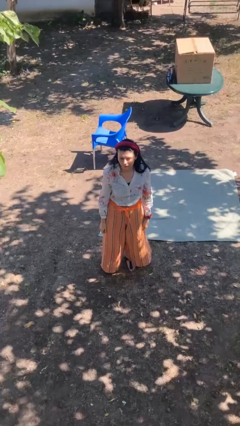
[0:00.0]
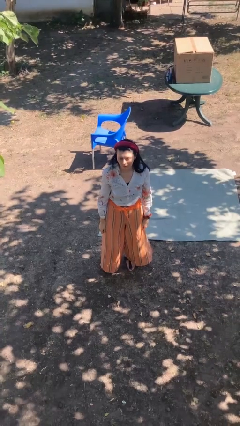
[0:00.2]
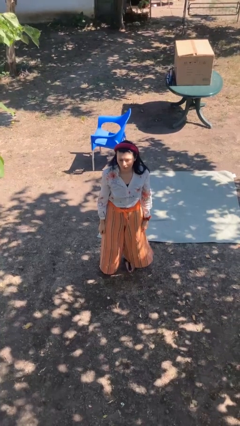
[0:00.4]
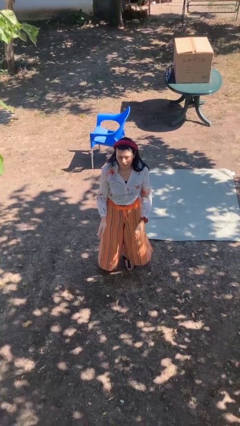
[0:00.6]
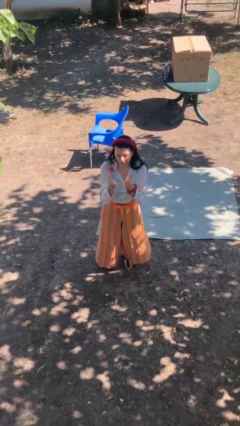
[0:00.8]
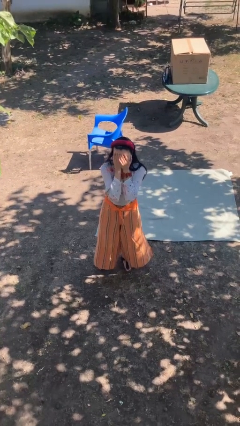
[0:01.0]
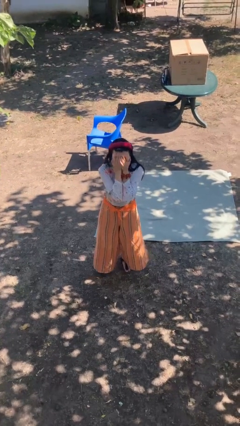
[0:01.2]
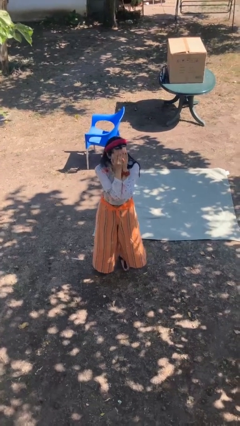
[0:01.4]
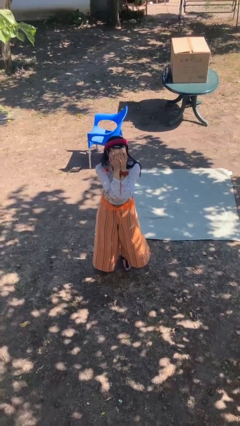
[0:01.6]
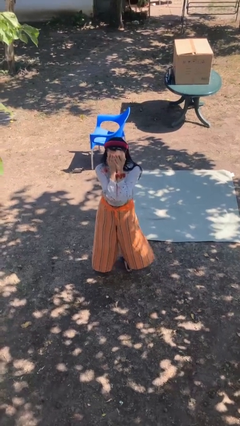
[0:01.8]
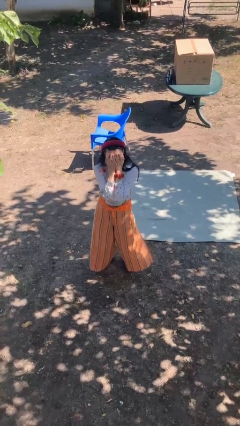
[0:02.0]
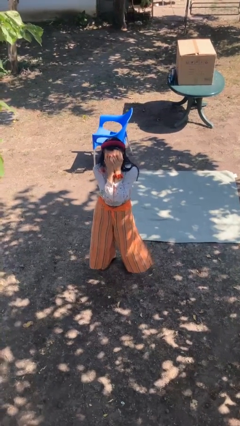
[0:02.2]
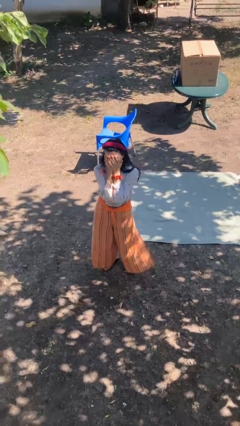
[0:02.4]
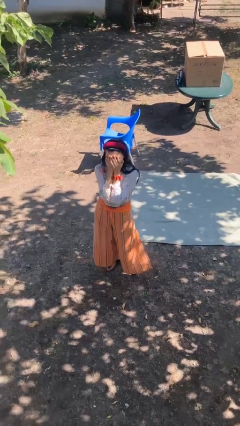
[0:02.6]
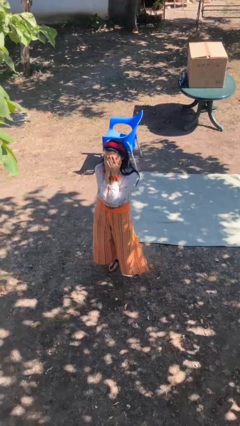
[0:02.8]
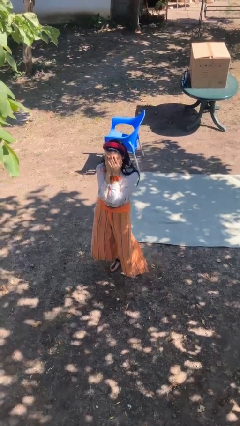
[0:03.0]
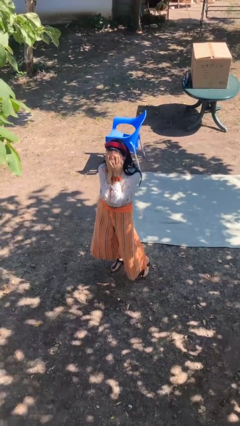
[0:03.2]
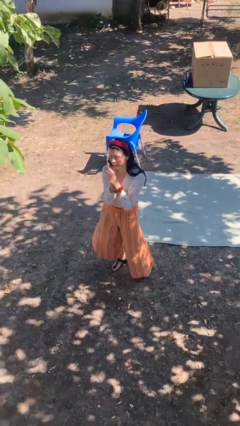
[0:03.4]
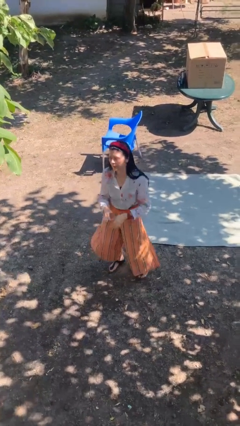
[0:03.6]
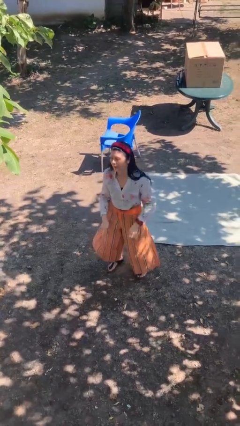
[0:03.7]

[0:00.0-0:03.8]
person covers face with hands

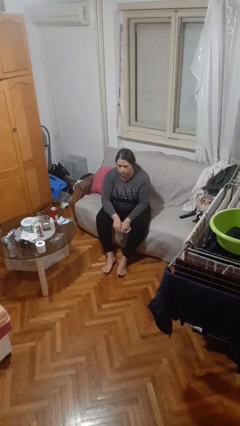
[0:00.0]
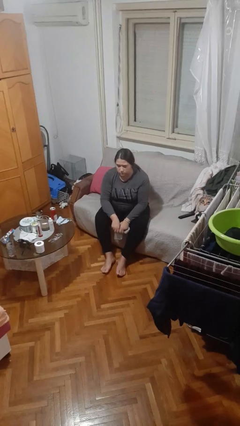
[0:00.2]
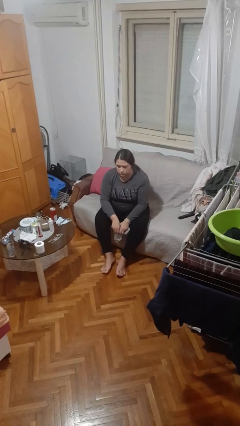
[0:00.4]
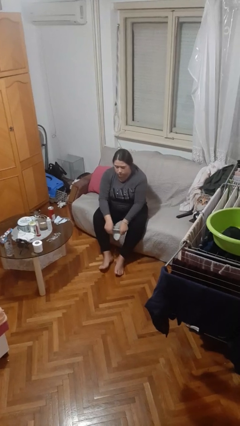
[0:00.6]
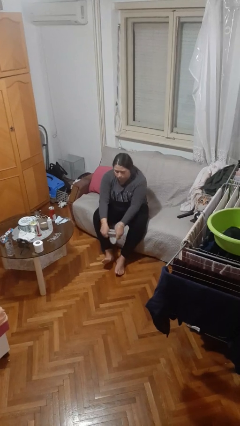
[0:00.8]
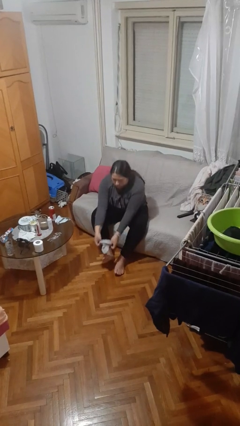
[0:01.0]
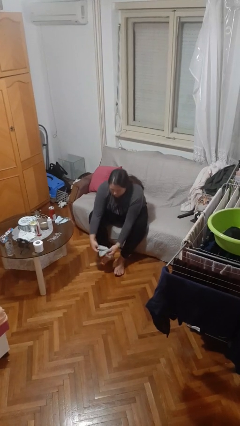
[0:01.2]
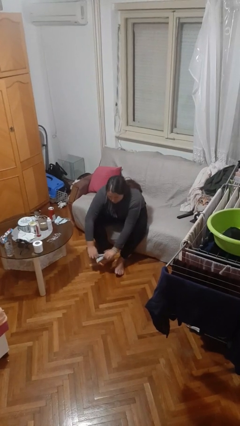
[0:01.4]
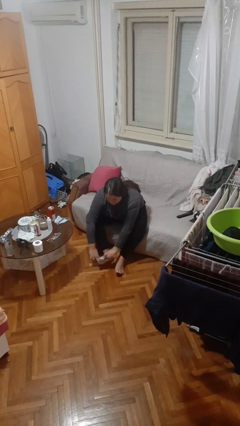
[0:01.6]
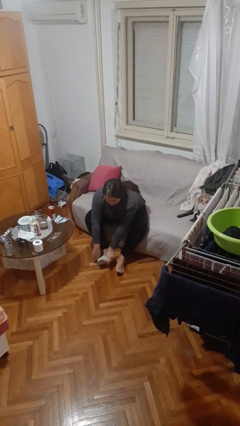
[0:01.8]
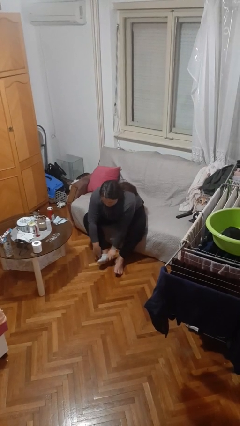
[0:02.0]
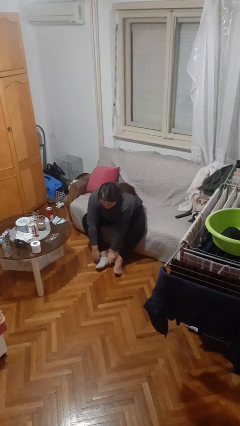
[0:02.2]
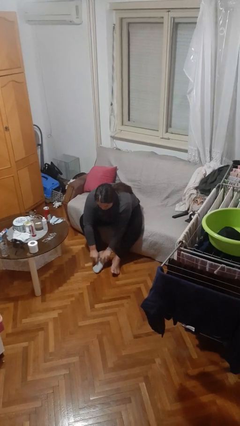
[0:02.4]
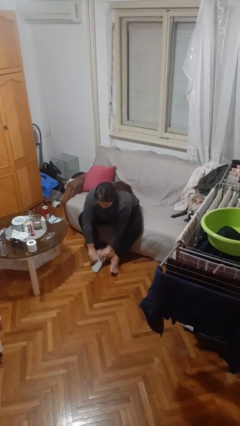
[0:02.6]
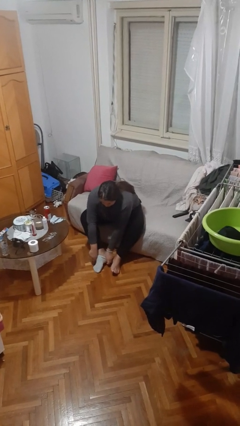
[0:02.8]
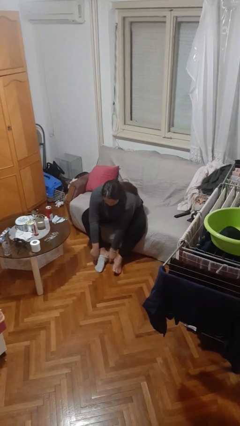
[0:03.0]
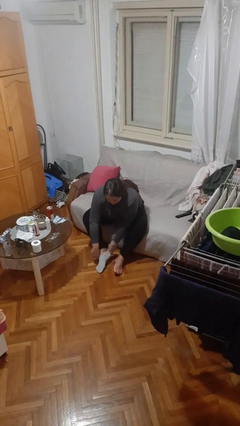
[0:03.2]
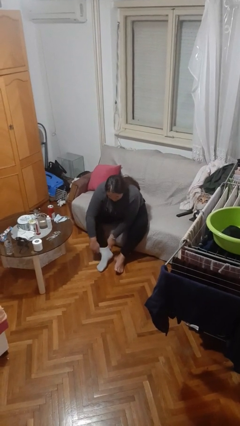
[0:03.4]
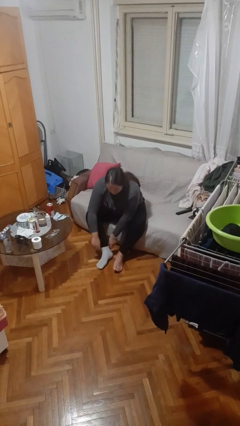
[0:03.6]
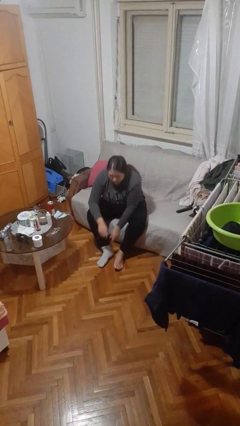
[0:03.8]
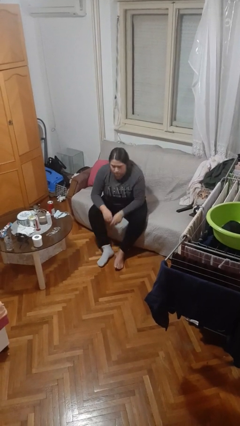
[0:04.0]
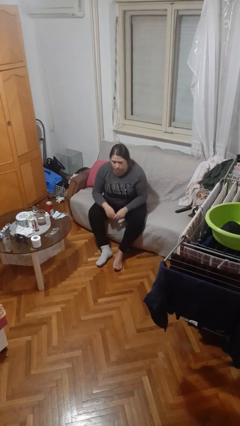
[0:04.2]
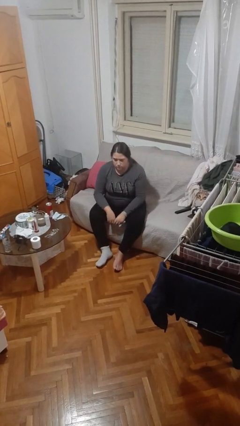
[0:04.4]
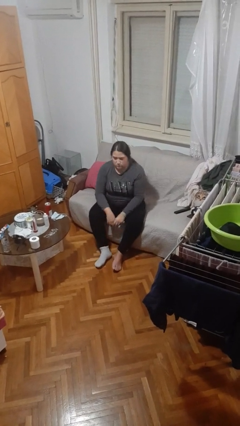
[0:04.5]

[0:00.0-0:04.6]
person puts on socks

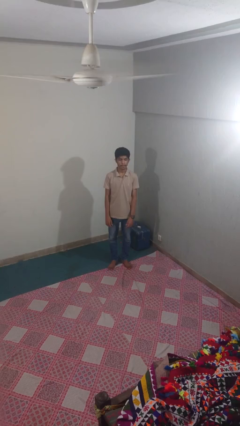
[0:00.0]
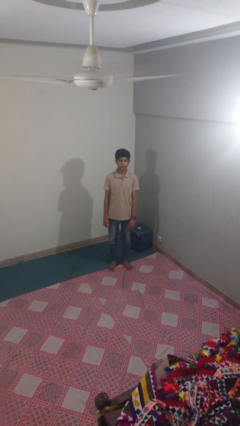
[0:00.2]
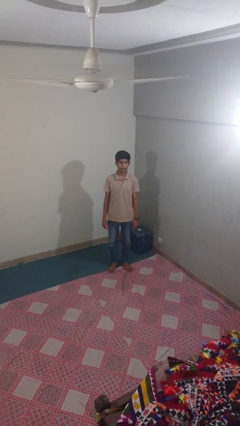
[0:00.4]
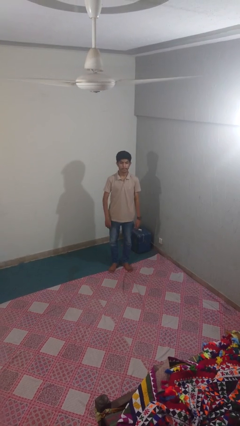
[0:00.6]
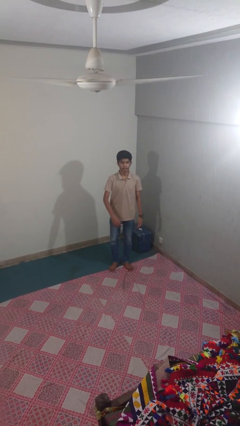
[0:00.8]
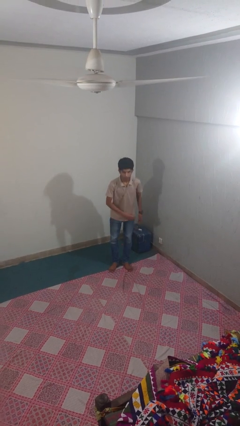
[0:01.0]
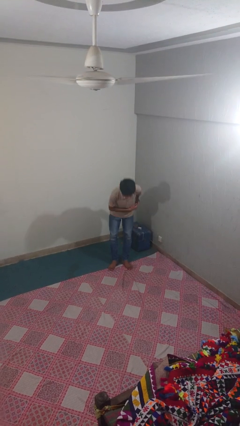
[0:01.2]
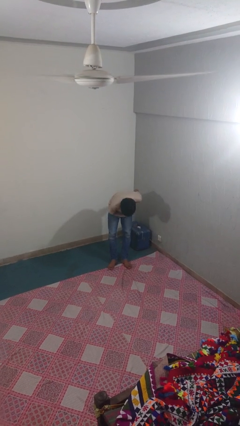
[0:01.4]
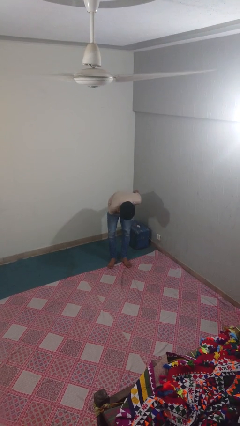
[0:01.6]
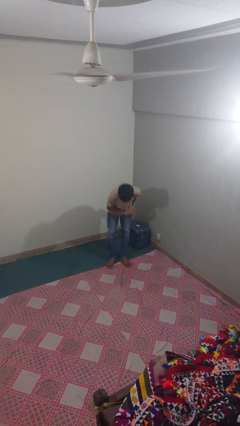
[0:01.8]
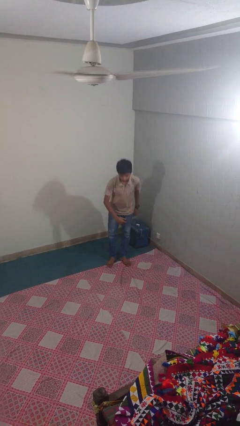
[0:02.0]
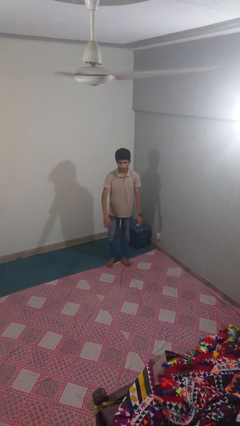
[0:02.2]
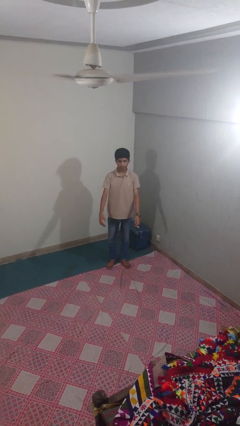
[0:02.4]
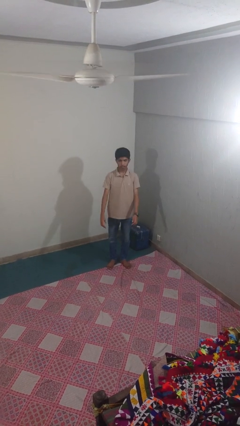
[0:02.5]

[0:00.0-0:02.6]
person bows

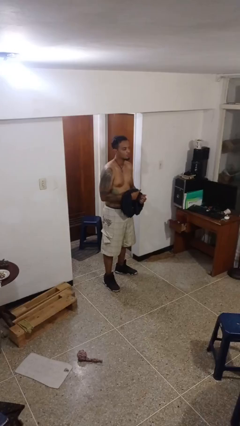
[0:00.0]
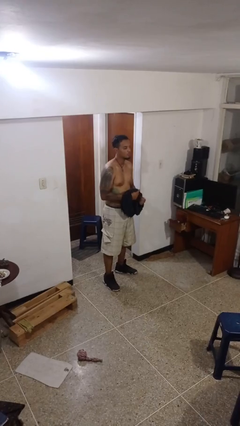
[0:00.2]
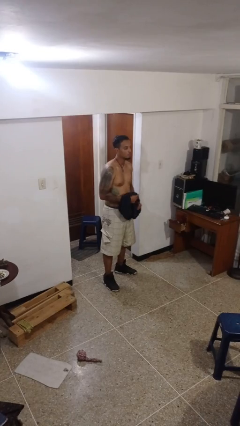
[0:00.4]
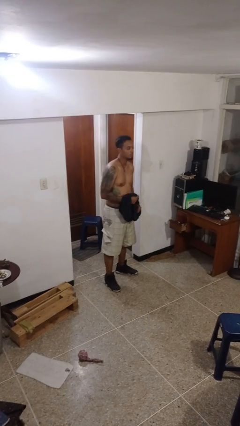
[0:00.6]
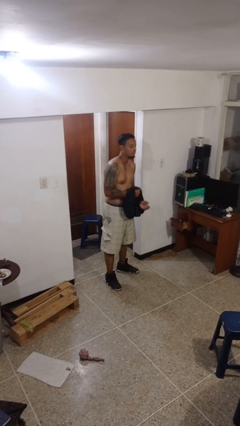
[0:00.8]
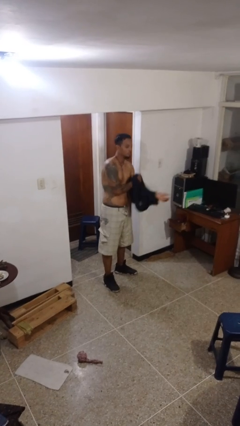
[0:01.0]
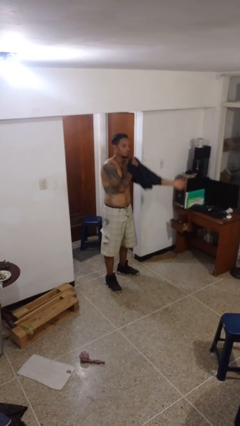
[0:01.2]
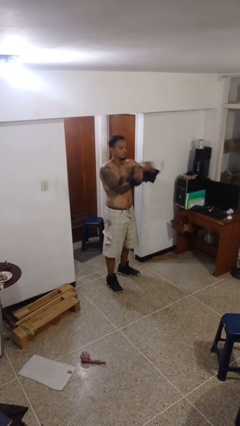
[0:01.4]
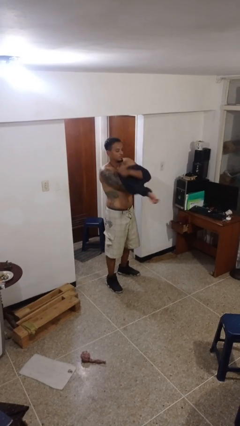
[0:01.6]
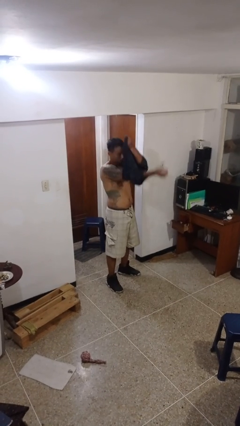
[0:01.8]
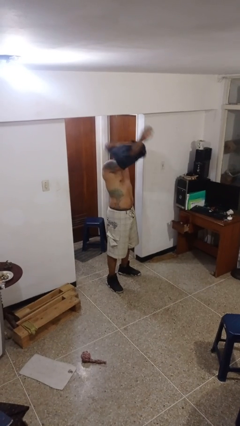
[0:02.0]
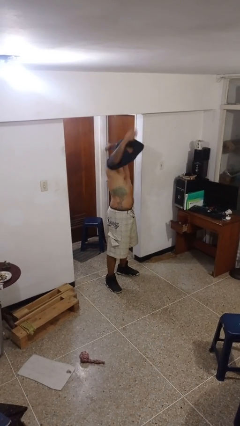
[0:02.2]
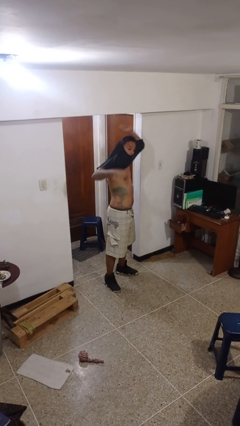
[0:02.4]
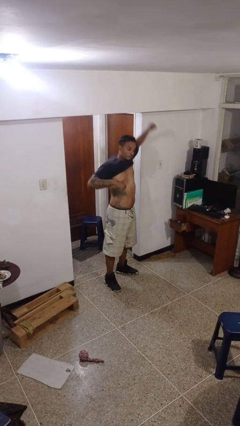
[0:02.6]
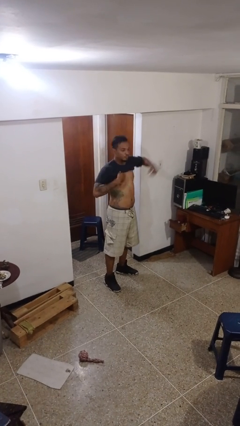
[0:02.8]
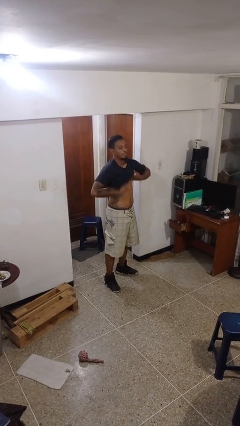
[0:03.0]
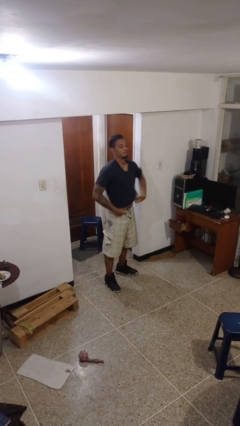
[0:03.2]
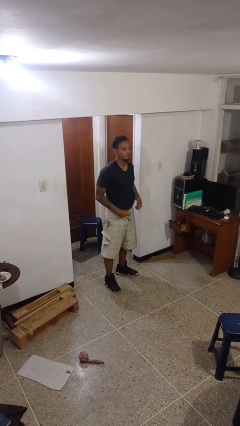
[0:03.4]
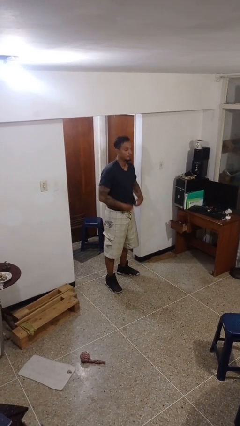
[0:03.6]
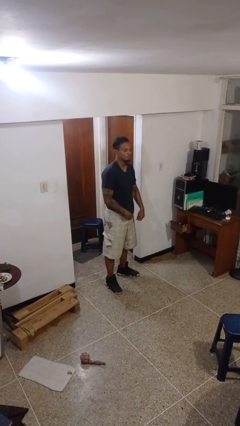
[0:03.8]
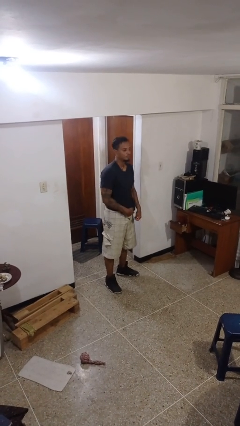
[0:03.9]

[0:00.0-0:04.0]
person tucks in shirt

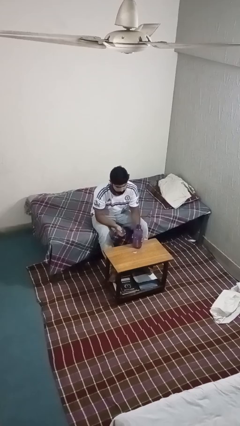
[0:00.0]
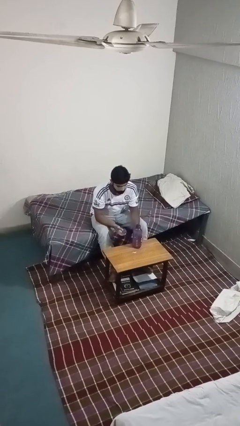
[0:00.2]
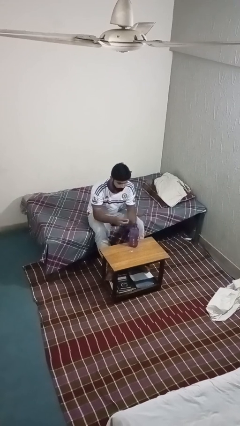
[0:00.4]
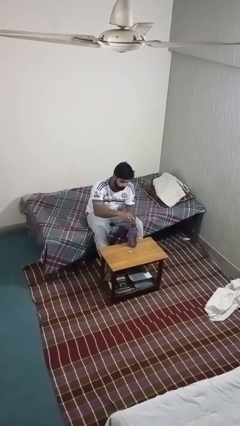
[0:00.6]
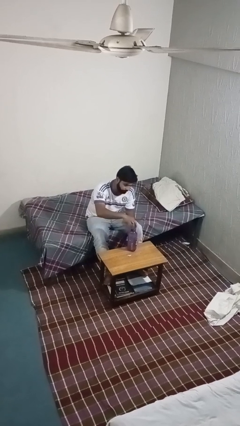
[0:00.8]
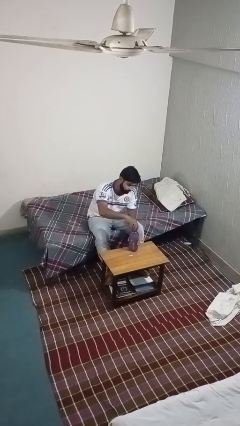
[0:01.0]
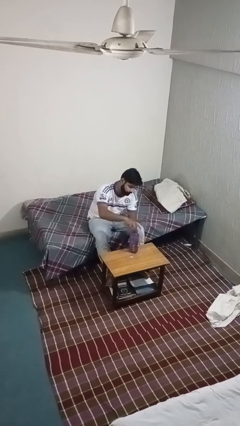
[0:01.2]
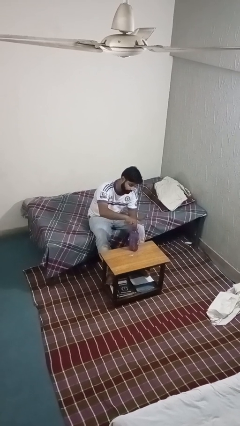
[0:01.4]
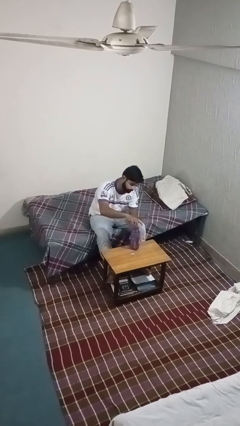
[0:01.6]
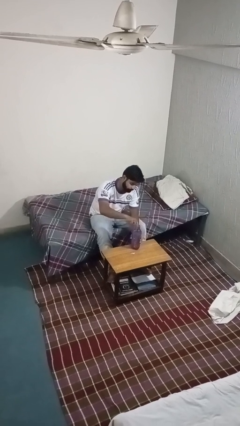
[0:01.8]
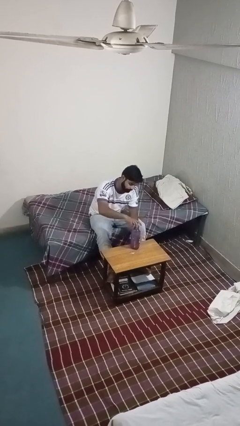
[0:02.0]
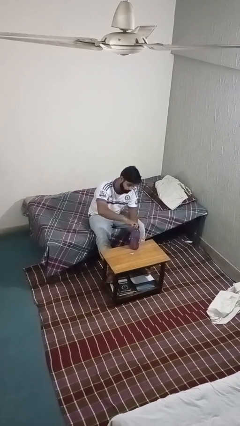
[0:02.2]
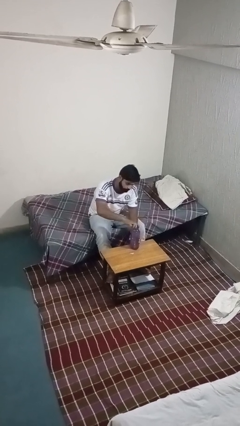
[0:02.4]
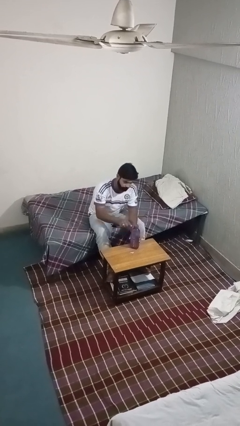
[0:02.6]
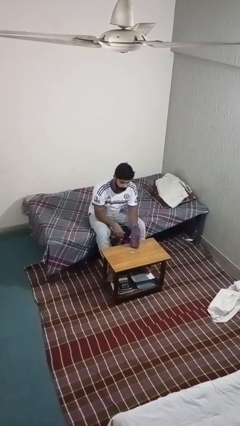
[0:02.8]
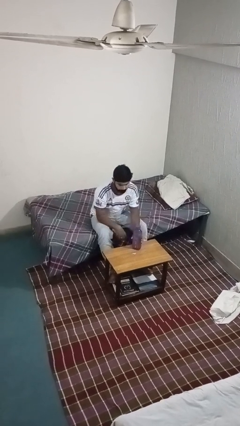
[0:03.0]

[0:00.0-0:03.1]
person screws lid to bottle
